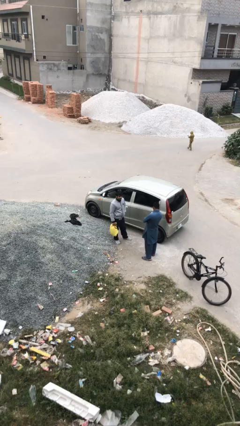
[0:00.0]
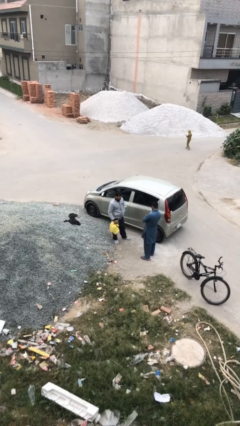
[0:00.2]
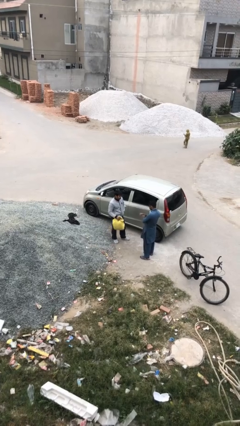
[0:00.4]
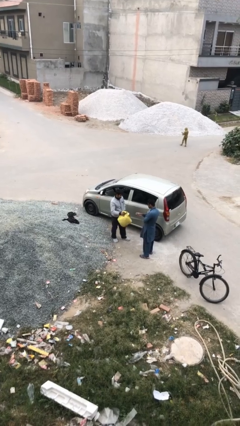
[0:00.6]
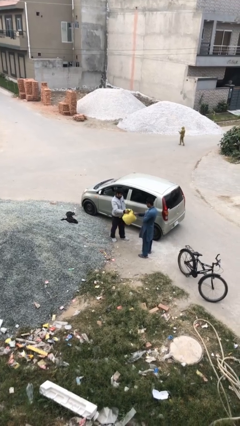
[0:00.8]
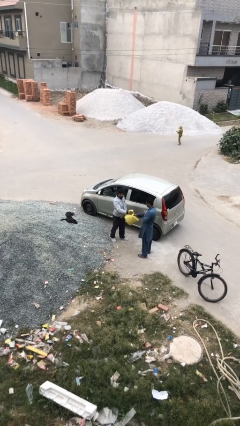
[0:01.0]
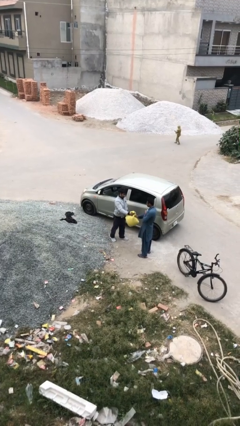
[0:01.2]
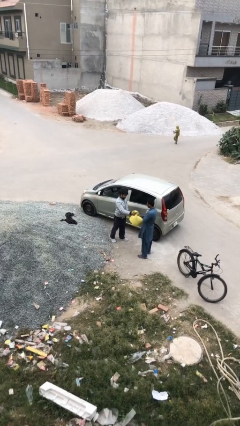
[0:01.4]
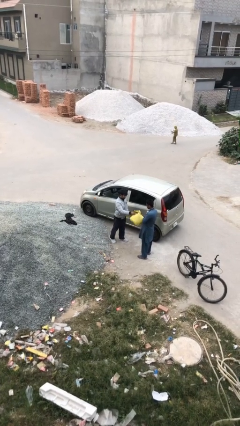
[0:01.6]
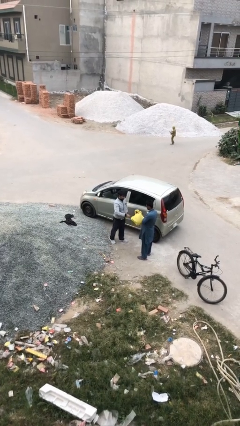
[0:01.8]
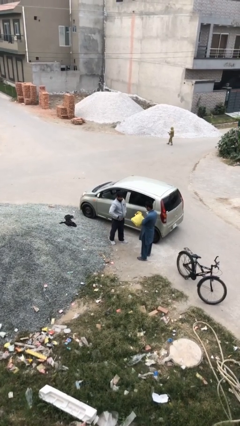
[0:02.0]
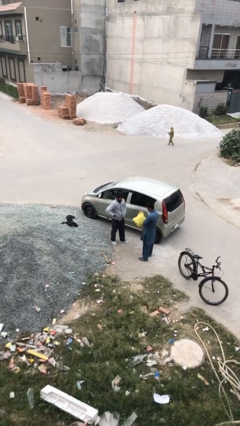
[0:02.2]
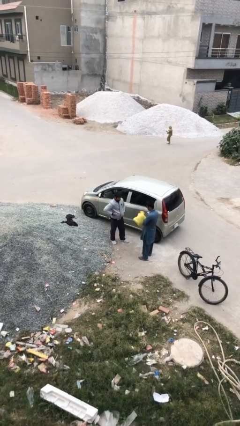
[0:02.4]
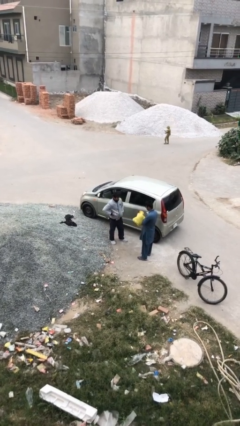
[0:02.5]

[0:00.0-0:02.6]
person transfers object to person

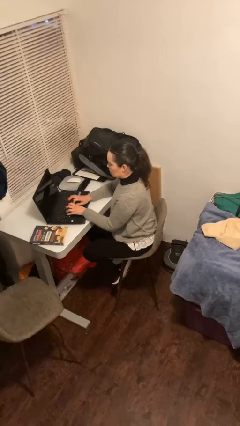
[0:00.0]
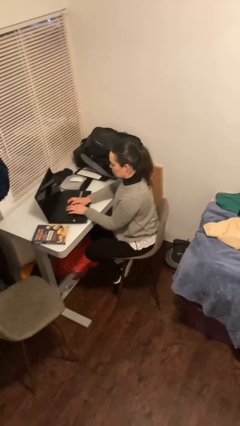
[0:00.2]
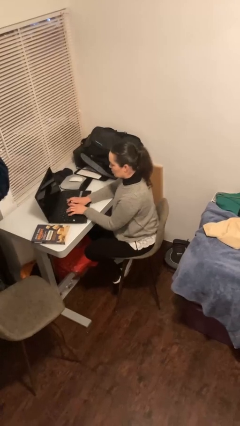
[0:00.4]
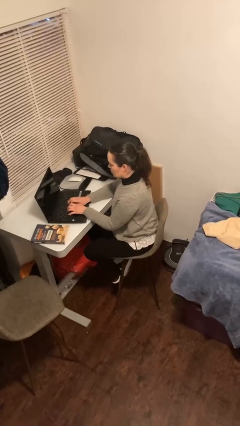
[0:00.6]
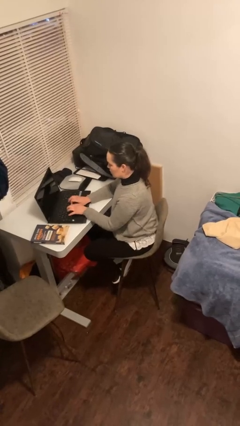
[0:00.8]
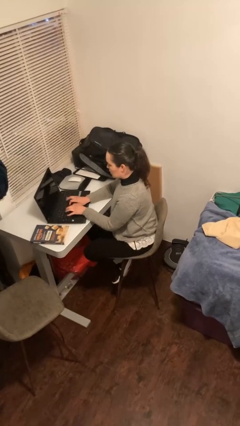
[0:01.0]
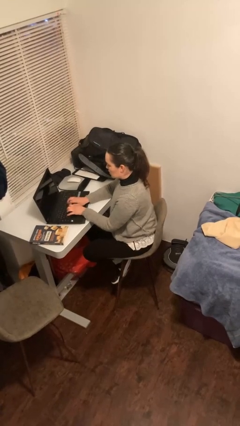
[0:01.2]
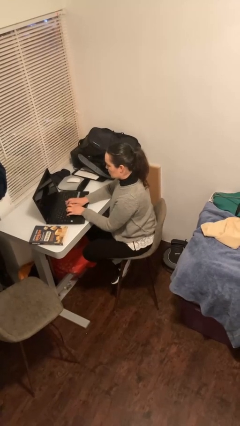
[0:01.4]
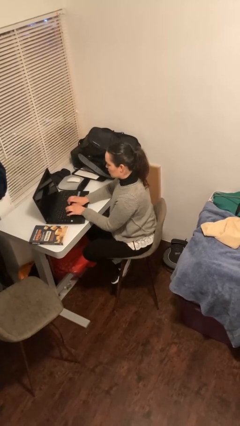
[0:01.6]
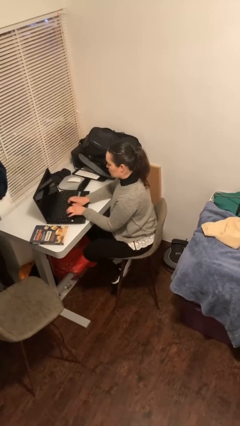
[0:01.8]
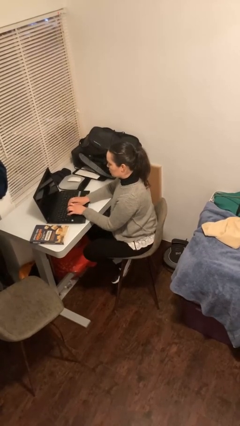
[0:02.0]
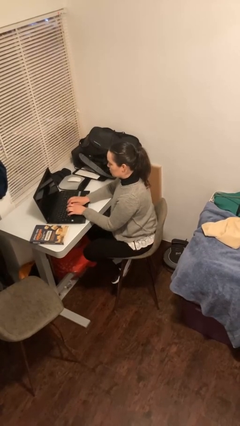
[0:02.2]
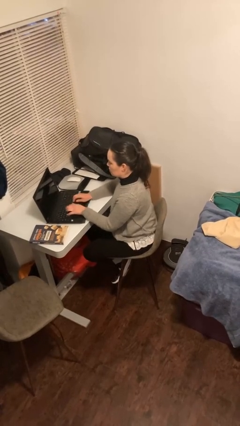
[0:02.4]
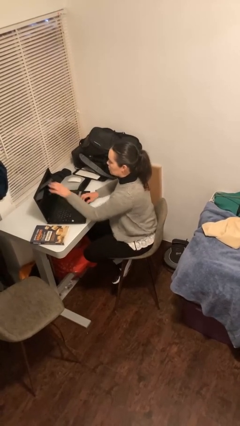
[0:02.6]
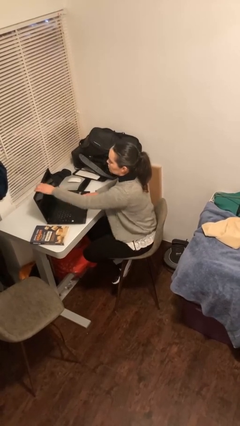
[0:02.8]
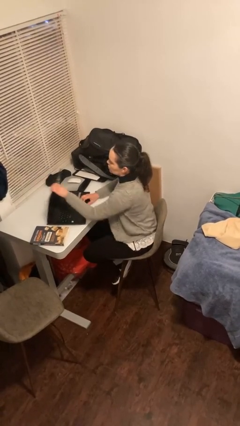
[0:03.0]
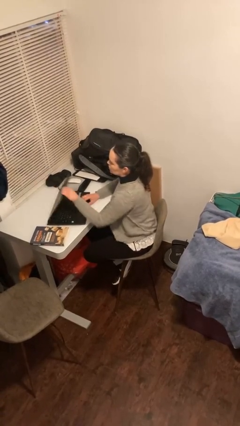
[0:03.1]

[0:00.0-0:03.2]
person interacts with laptop

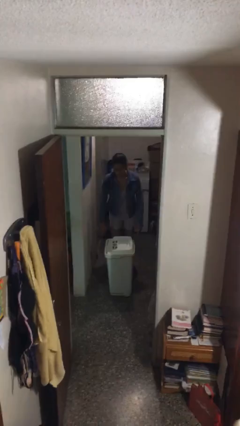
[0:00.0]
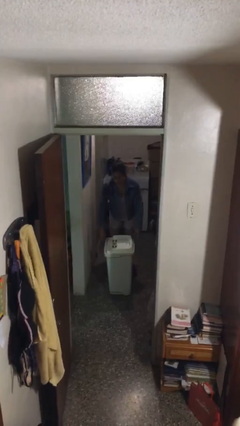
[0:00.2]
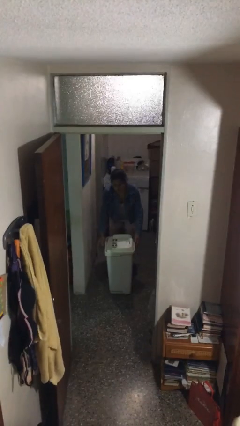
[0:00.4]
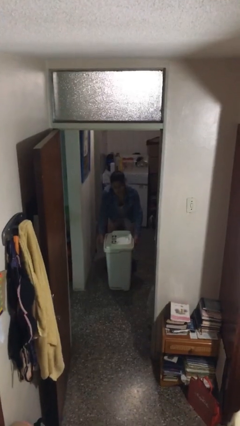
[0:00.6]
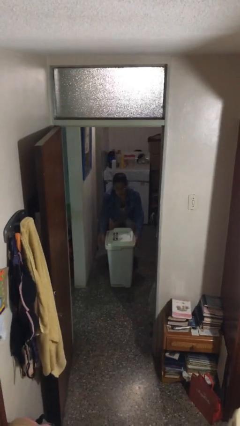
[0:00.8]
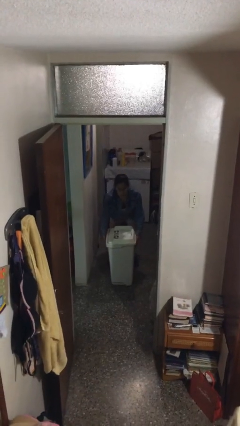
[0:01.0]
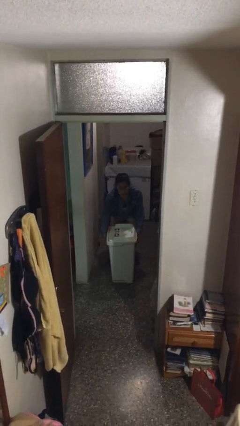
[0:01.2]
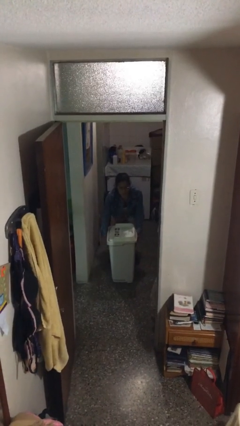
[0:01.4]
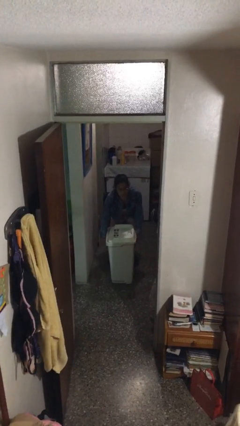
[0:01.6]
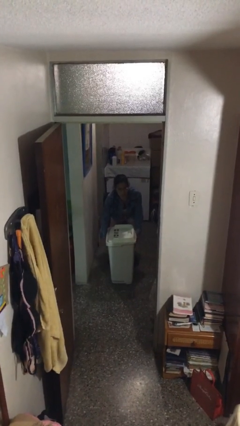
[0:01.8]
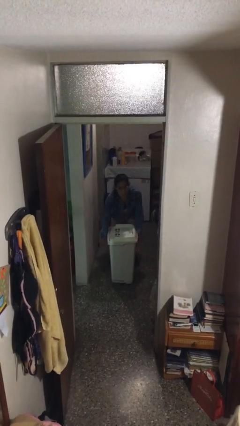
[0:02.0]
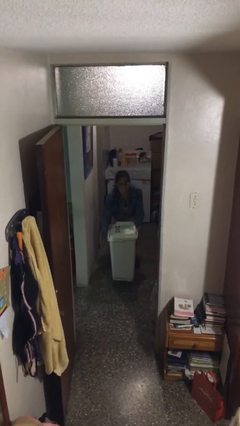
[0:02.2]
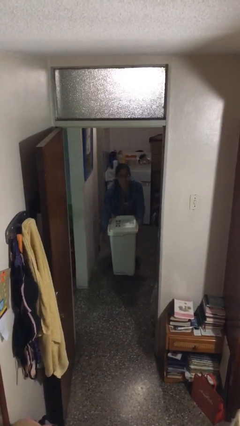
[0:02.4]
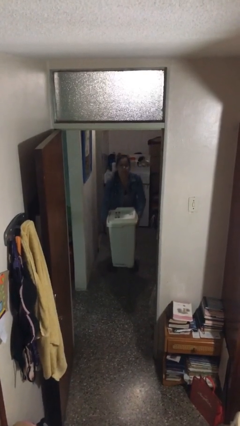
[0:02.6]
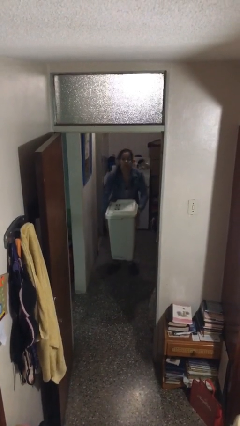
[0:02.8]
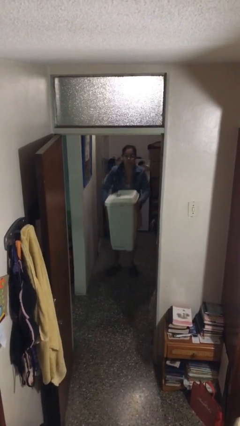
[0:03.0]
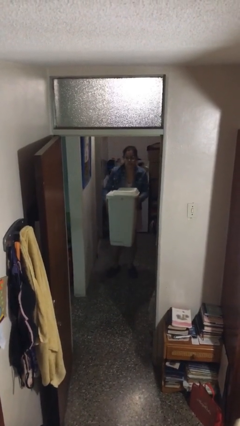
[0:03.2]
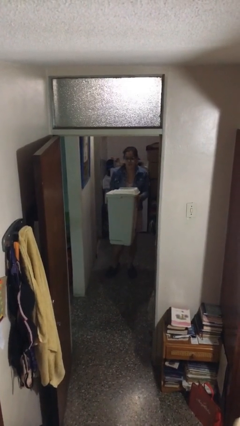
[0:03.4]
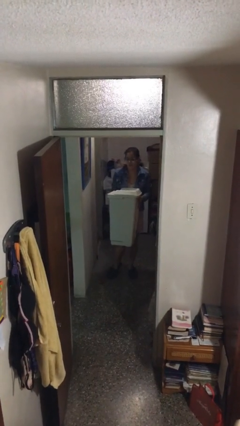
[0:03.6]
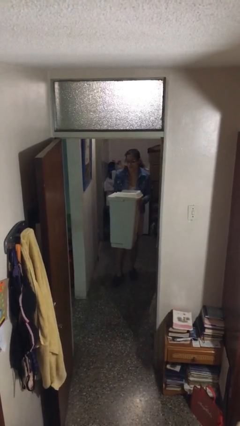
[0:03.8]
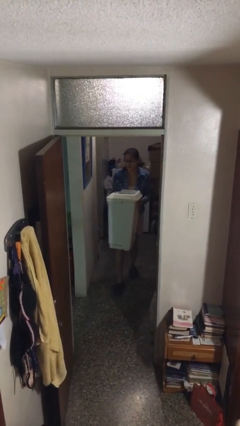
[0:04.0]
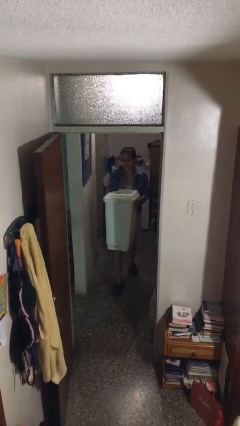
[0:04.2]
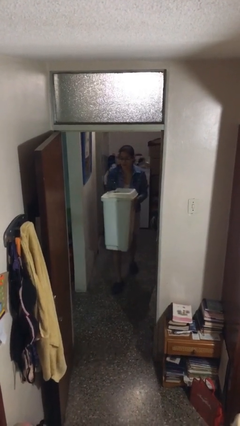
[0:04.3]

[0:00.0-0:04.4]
person picks up object from floor

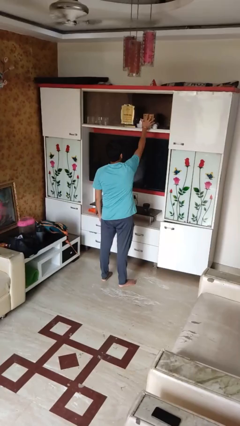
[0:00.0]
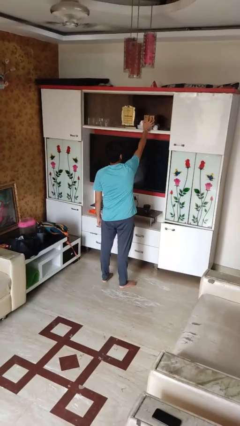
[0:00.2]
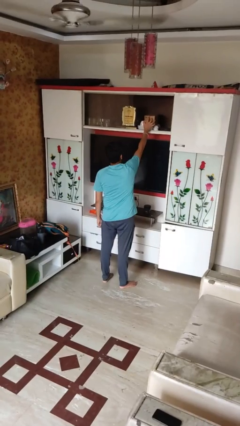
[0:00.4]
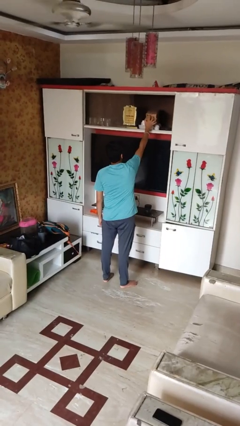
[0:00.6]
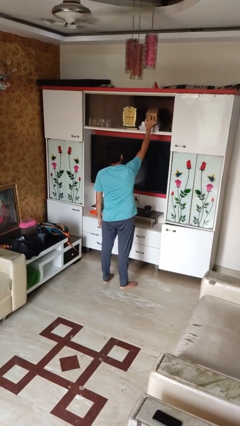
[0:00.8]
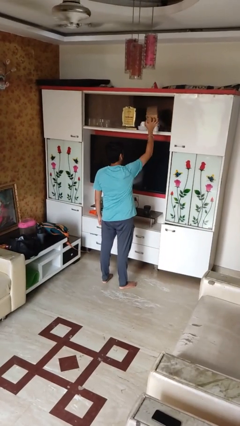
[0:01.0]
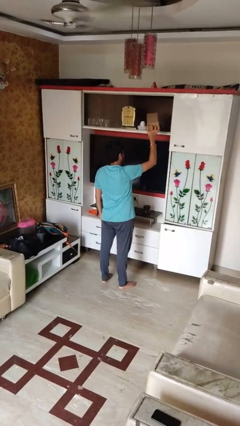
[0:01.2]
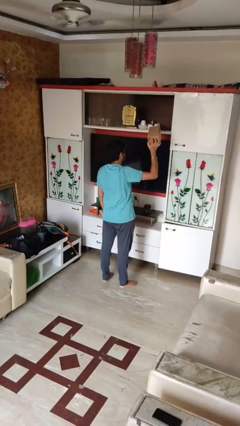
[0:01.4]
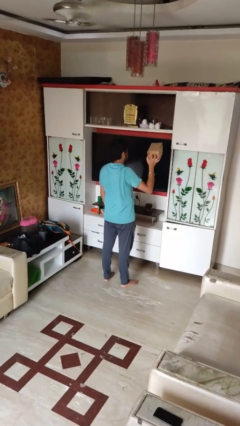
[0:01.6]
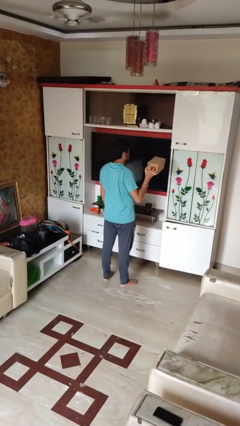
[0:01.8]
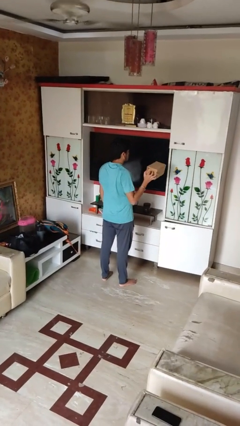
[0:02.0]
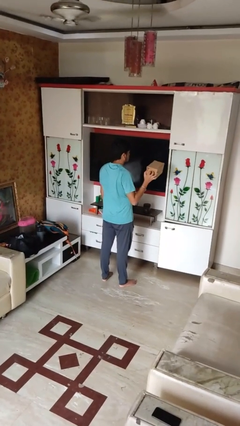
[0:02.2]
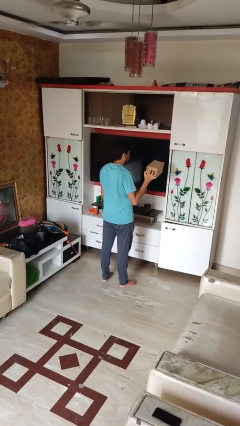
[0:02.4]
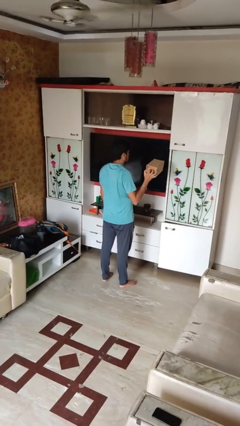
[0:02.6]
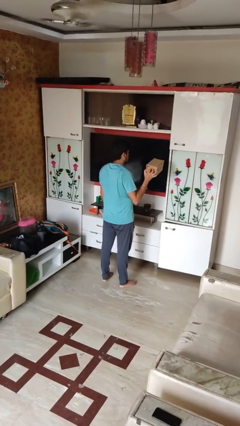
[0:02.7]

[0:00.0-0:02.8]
person picks up object from shelf

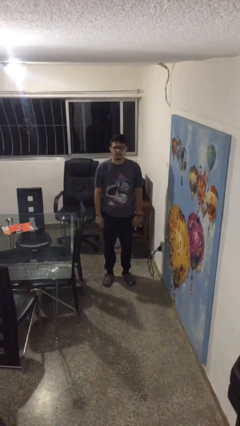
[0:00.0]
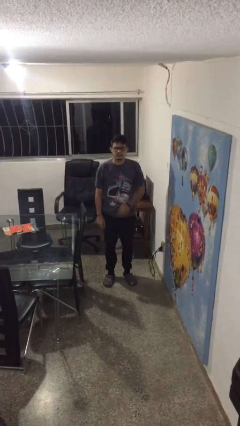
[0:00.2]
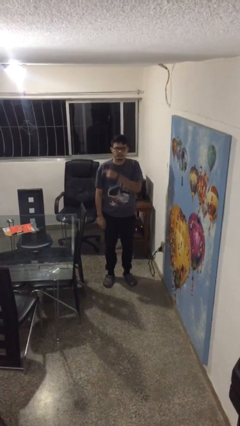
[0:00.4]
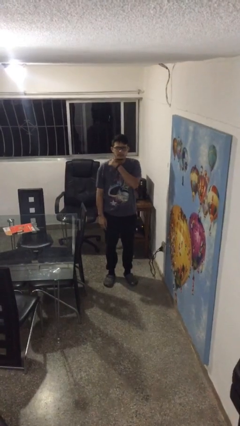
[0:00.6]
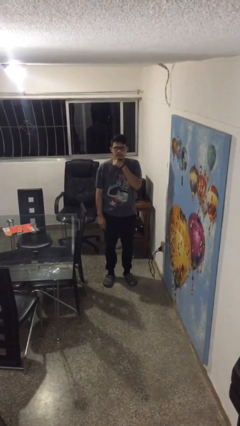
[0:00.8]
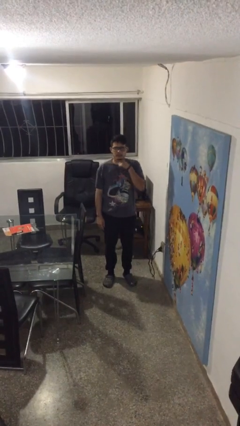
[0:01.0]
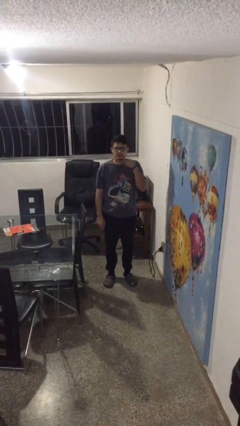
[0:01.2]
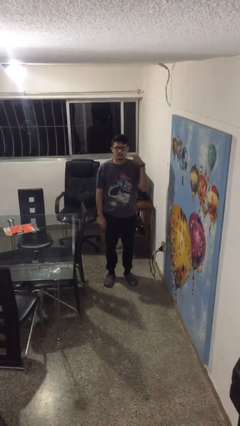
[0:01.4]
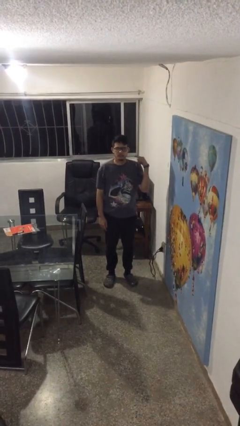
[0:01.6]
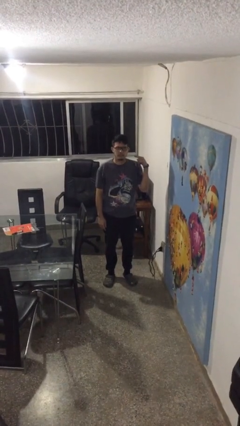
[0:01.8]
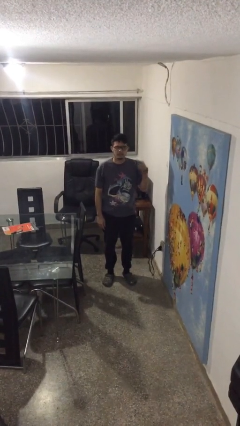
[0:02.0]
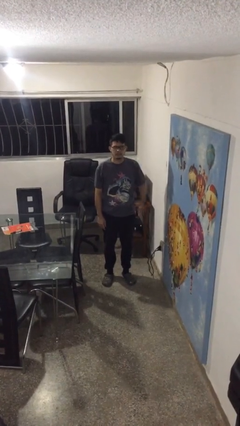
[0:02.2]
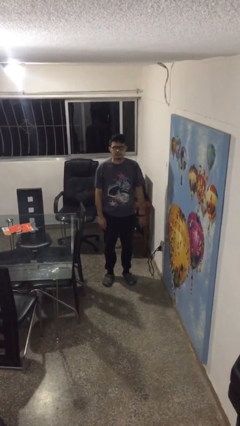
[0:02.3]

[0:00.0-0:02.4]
person gestures cut

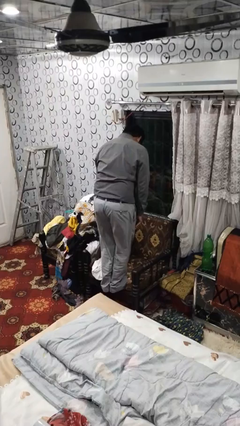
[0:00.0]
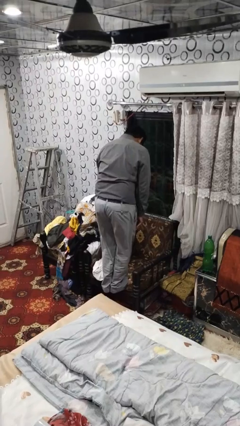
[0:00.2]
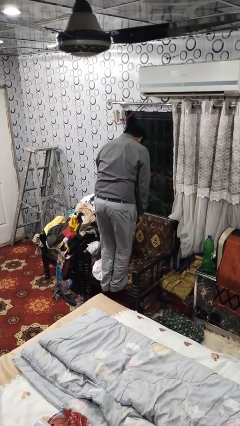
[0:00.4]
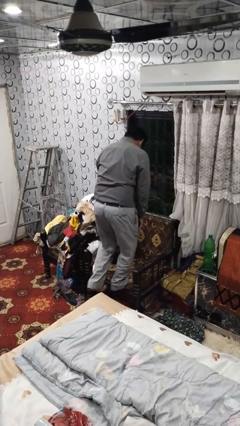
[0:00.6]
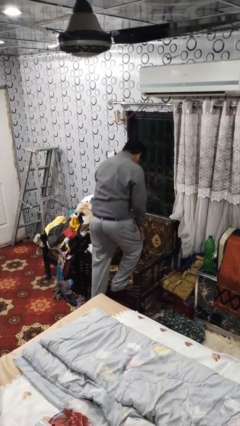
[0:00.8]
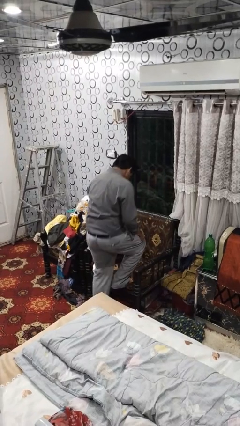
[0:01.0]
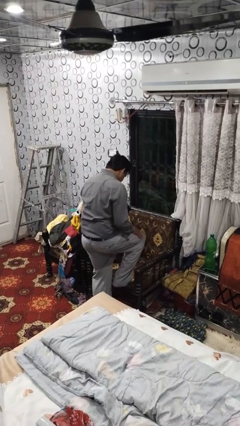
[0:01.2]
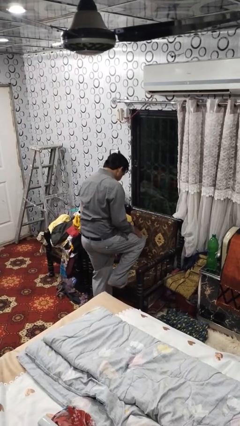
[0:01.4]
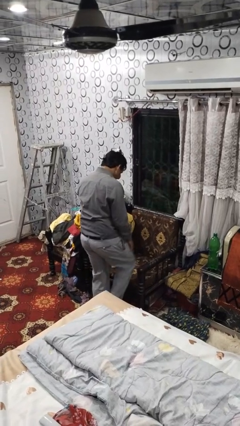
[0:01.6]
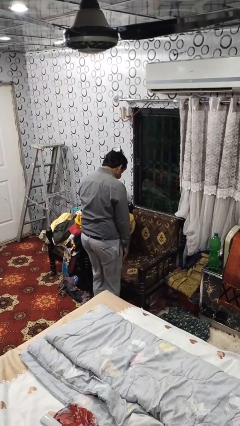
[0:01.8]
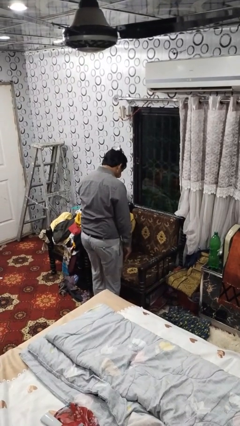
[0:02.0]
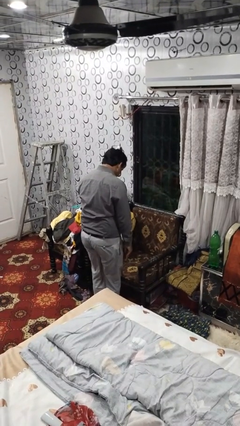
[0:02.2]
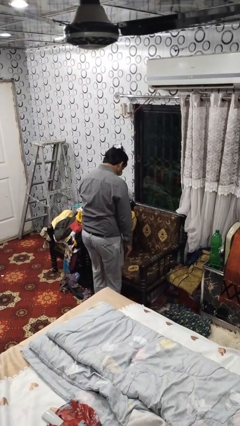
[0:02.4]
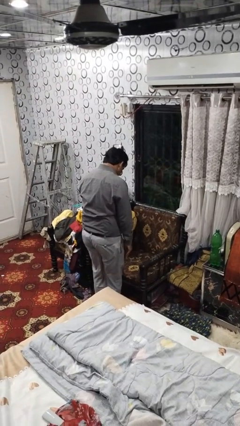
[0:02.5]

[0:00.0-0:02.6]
person climbs off couch
